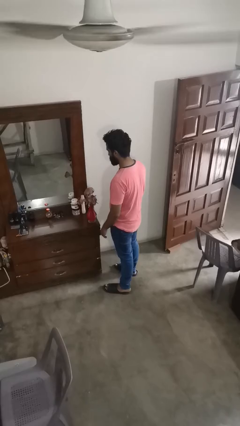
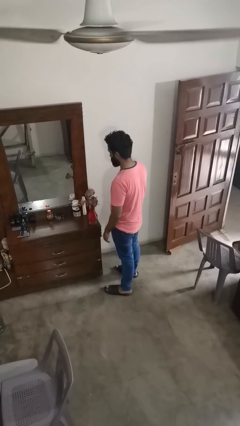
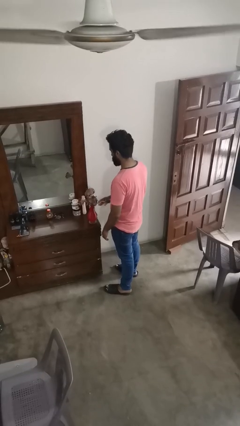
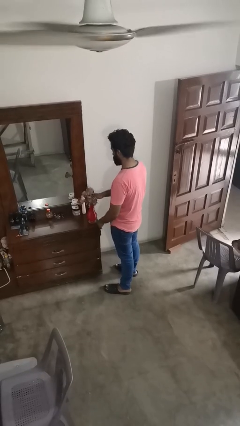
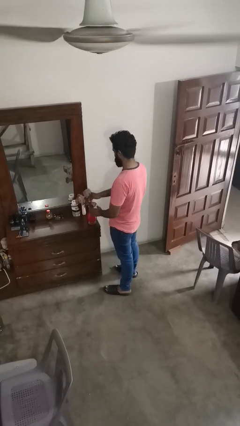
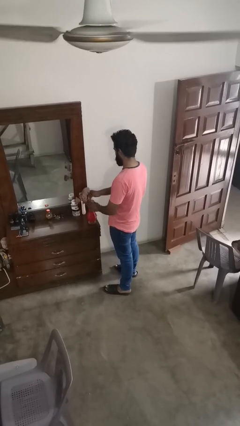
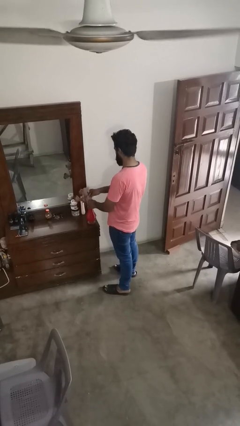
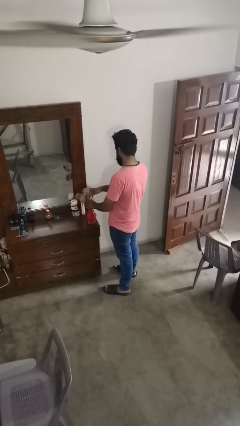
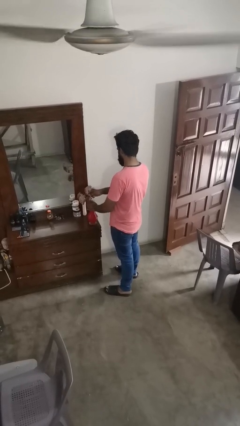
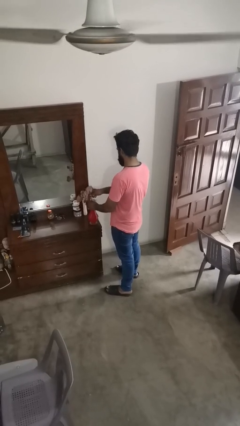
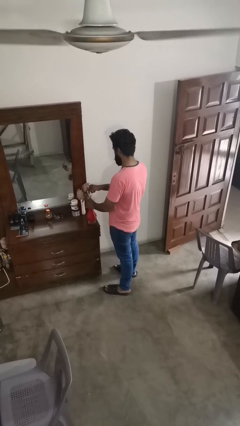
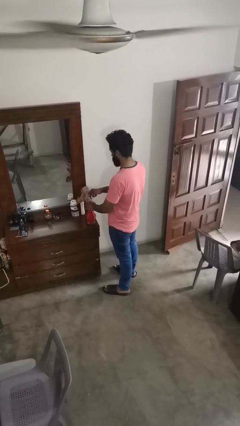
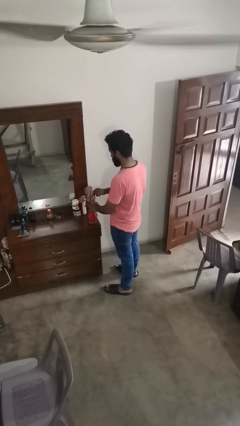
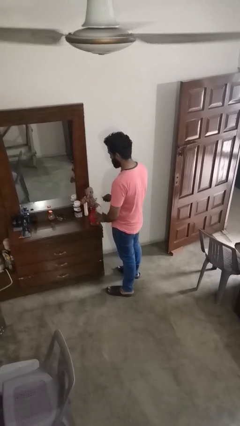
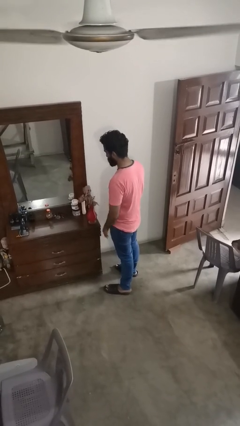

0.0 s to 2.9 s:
person arranges flowers in vase

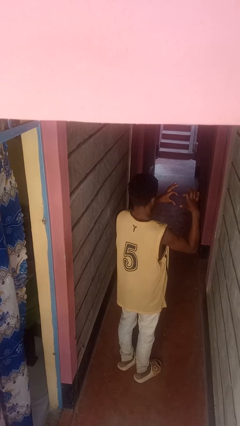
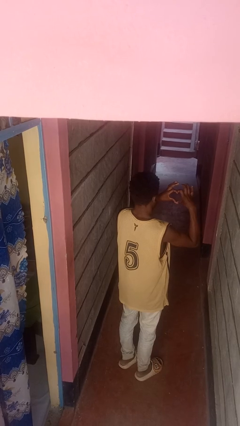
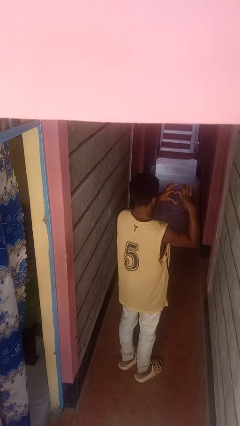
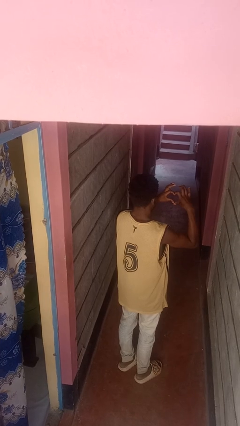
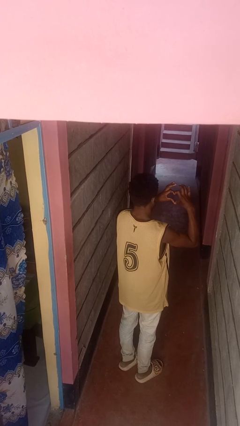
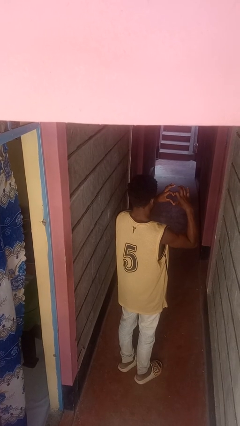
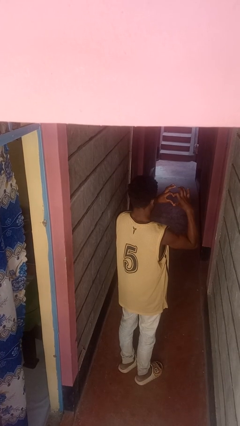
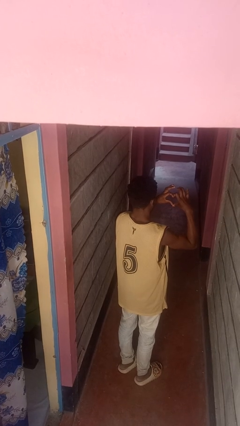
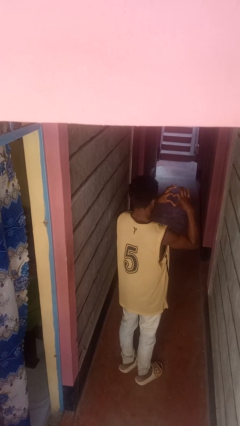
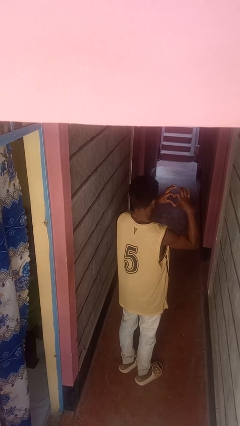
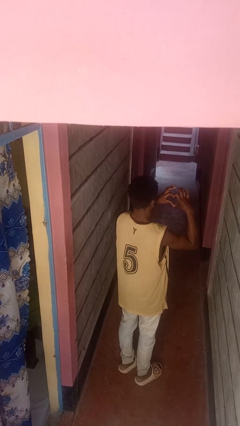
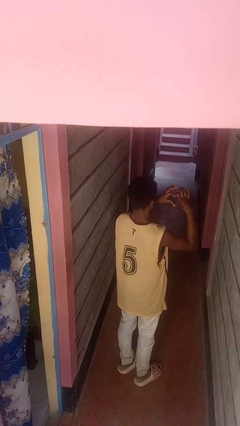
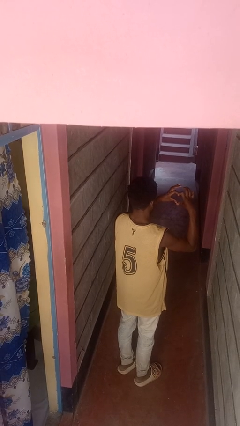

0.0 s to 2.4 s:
person gestures heart

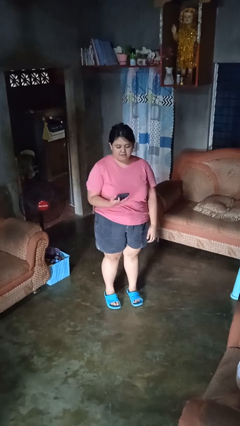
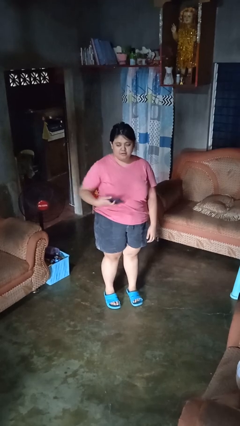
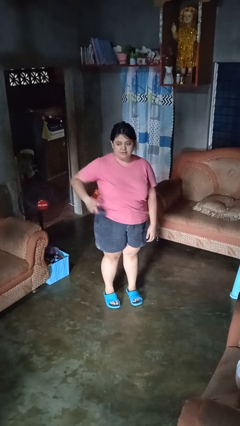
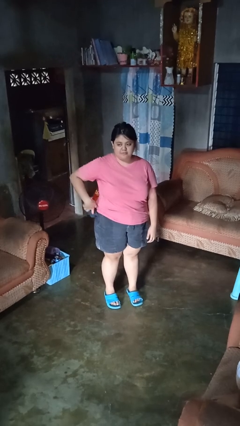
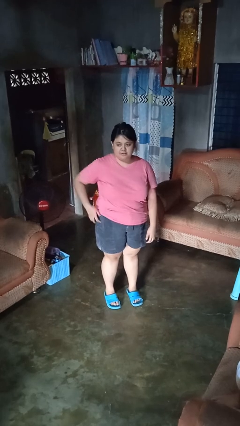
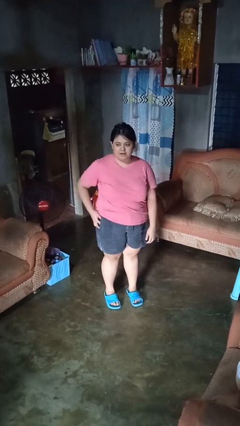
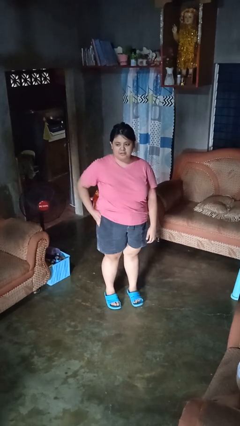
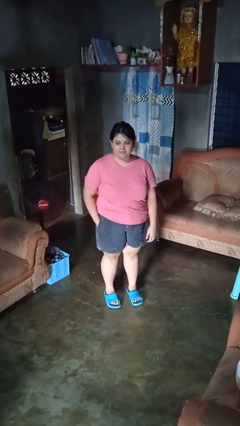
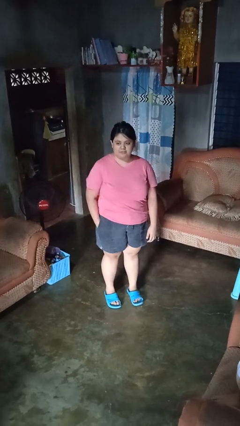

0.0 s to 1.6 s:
person puts phone into pocket

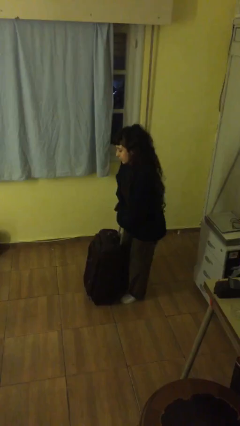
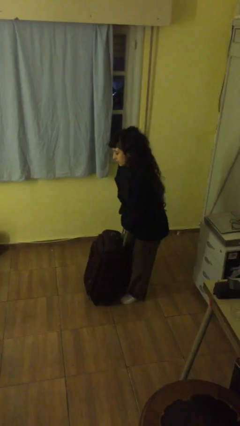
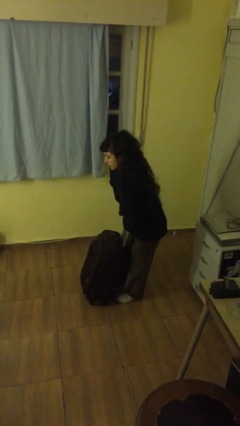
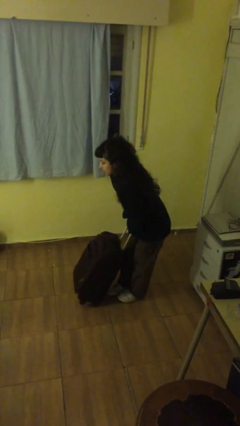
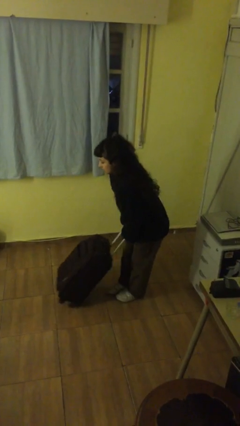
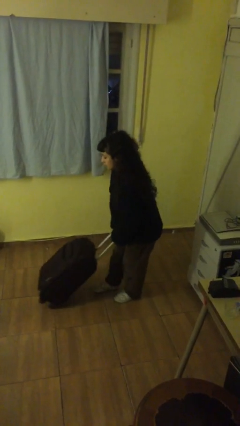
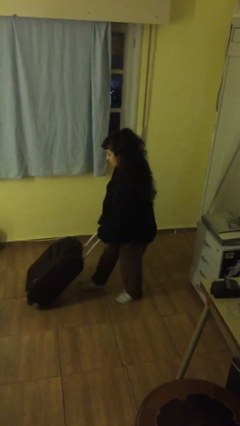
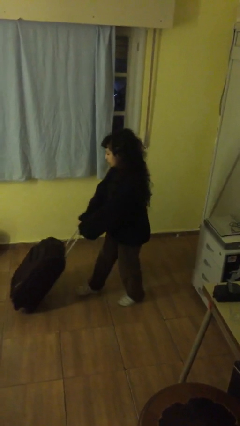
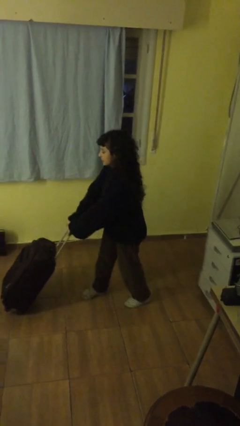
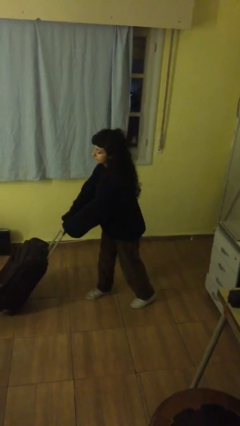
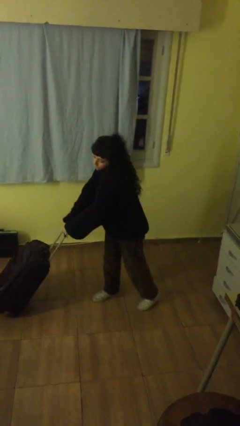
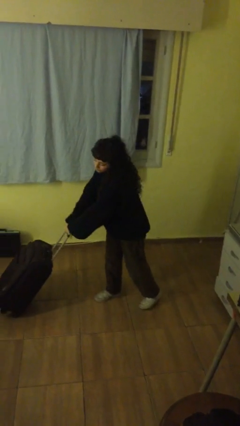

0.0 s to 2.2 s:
person pushes wheeled cart

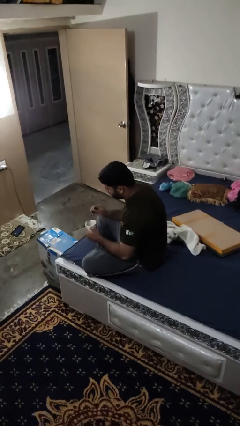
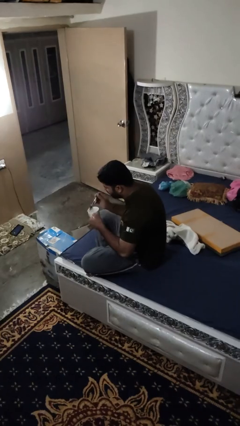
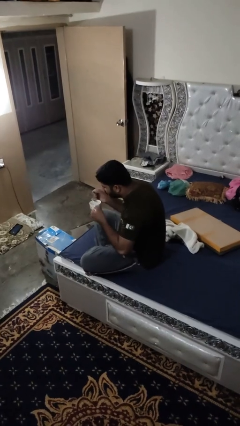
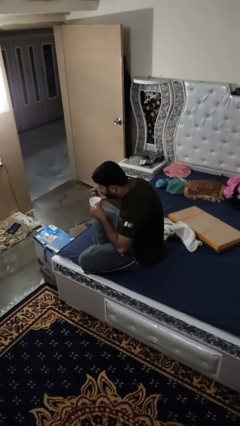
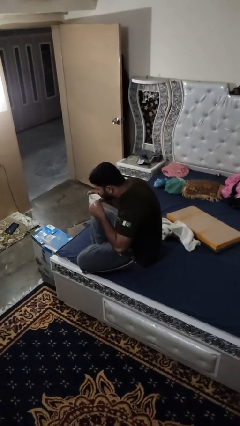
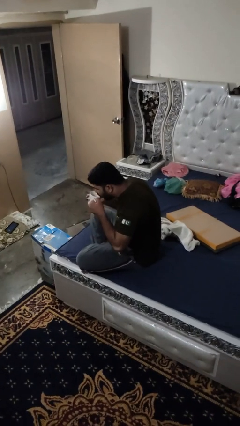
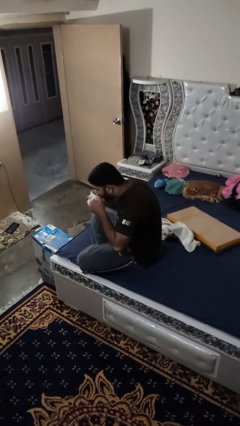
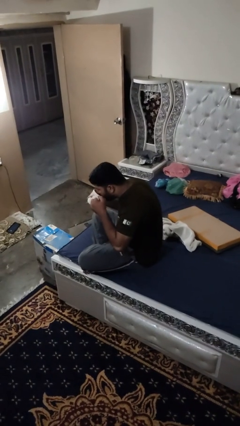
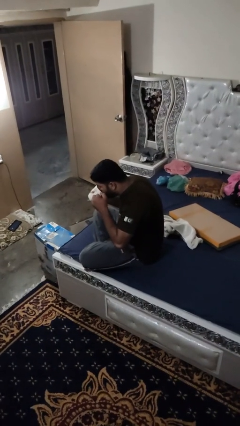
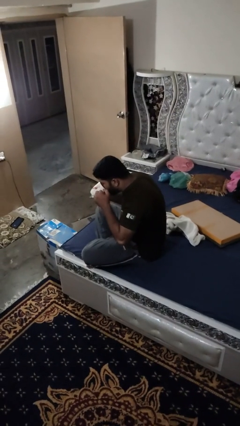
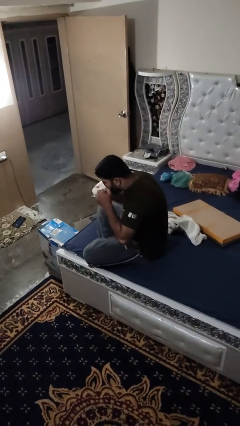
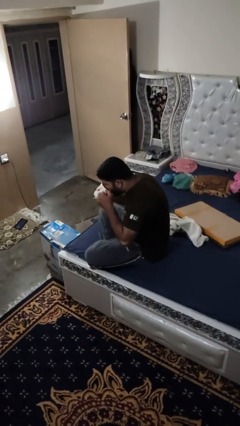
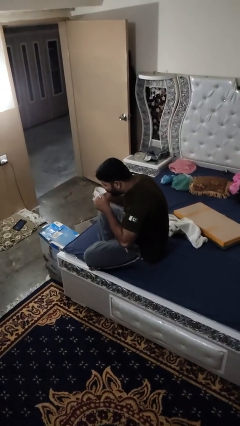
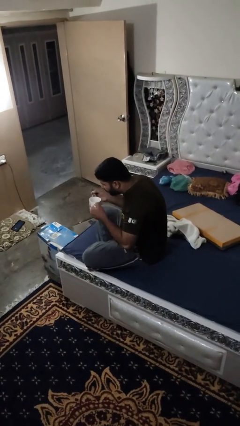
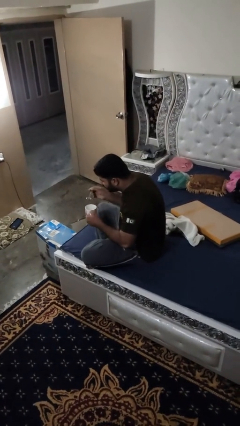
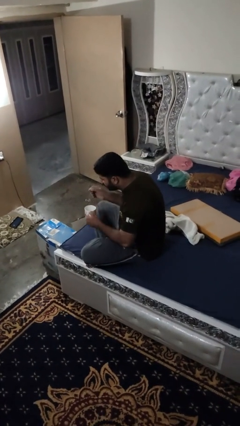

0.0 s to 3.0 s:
person drinks from mug

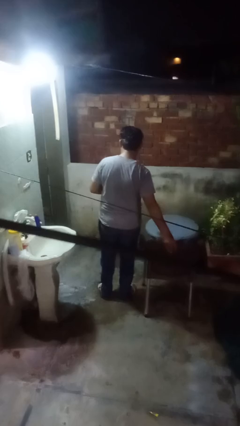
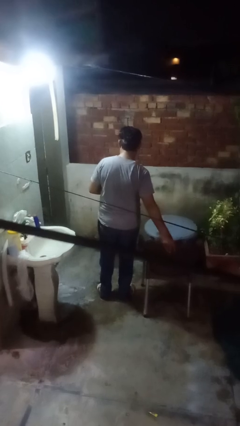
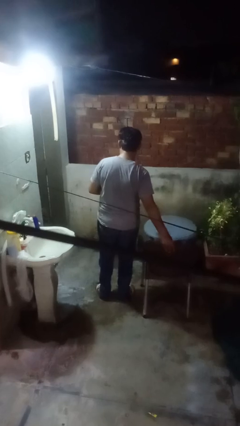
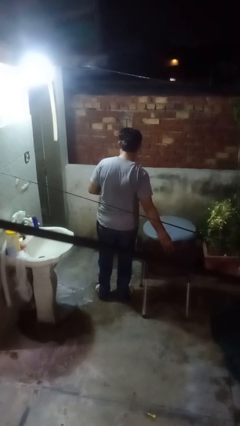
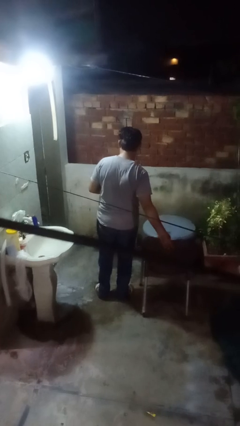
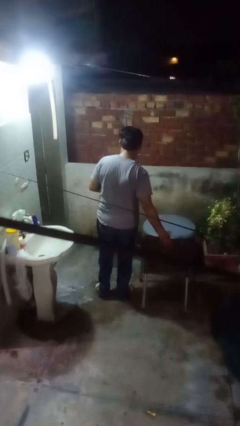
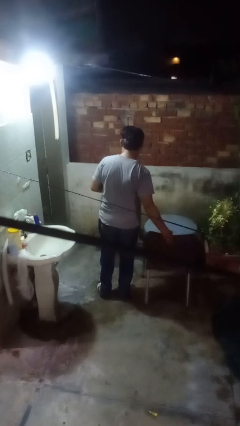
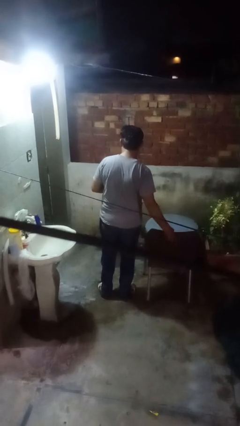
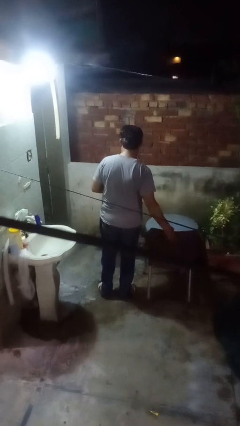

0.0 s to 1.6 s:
person pushes in chair

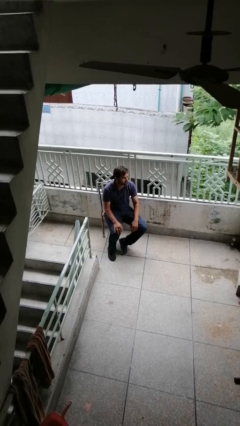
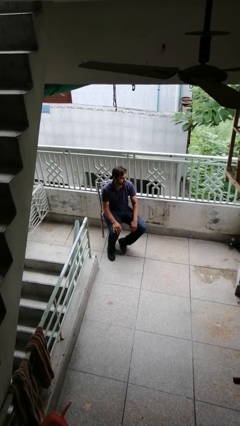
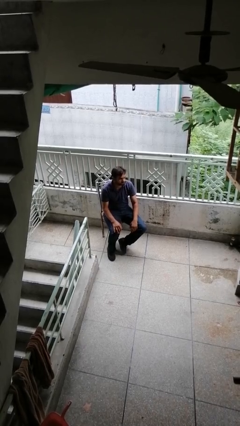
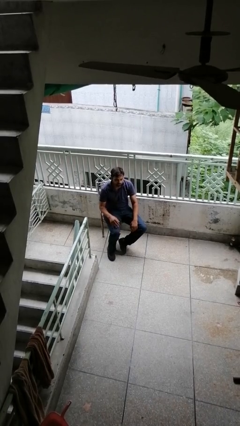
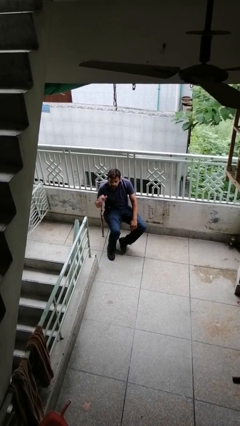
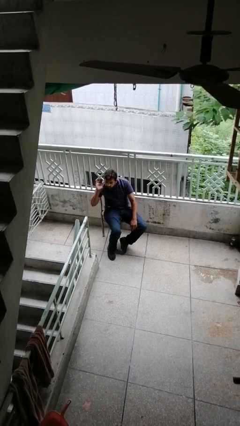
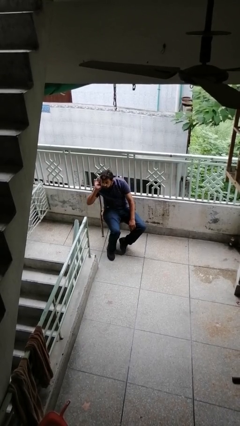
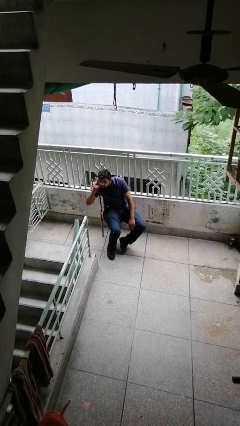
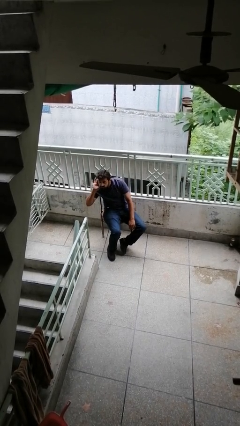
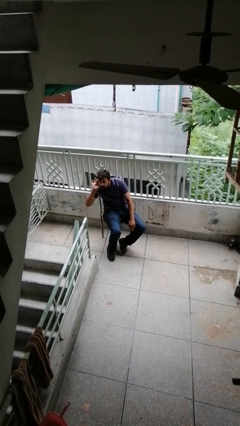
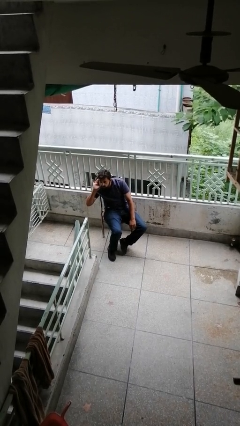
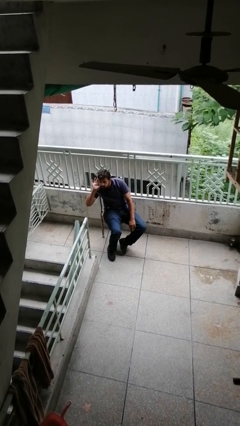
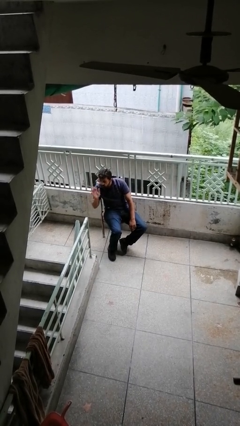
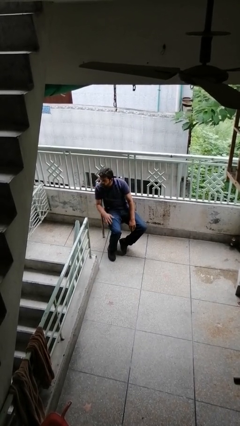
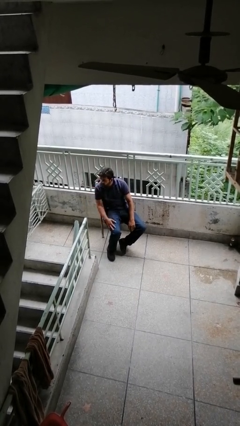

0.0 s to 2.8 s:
person gestures listen closely

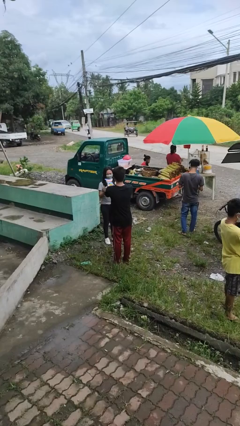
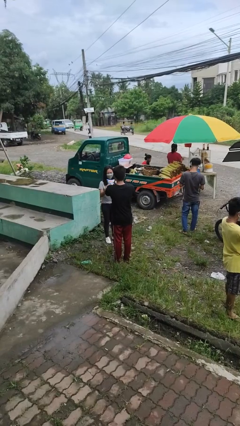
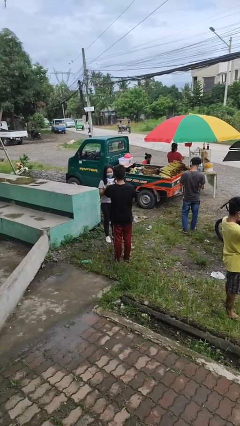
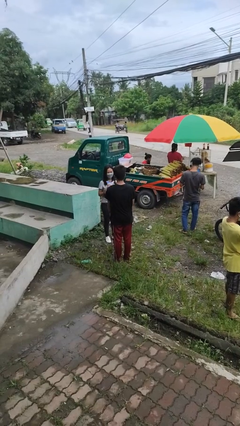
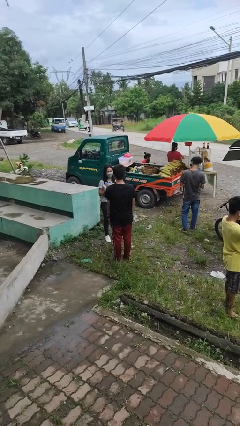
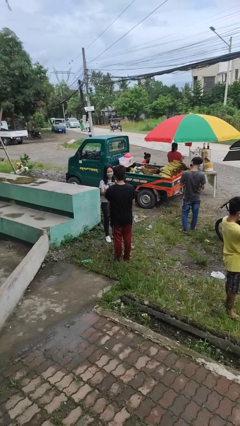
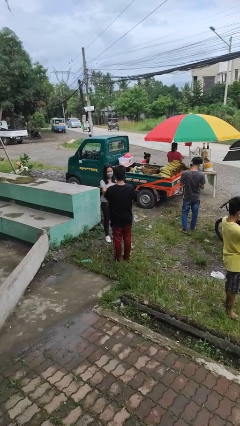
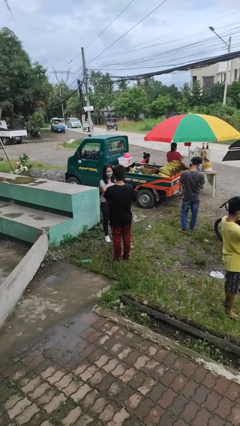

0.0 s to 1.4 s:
person transfers object to person
